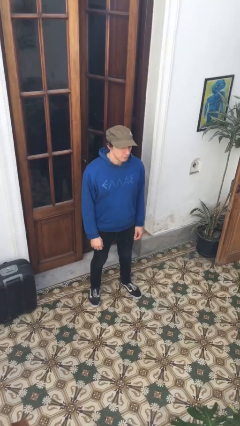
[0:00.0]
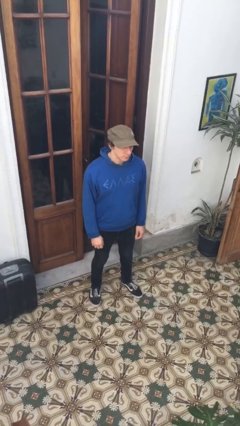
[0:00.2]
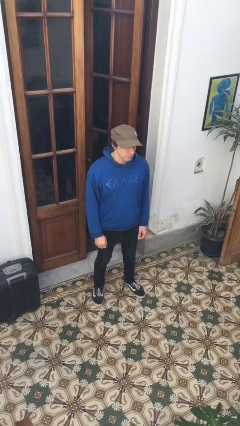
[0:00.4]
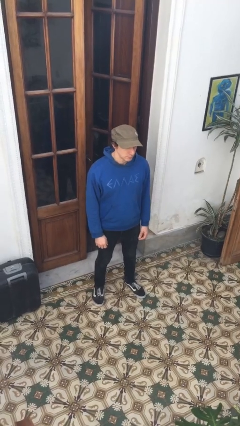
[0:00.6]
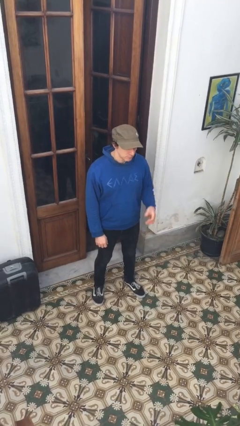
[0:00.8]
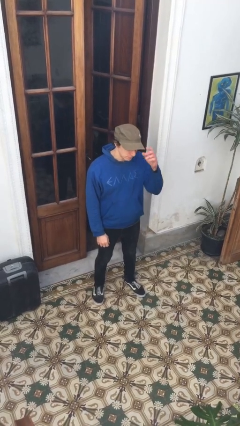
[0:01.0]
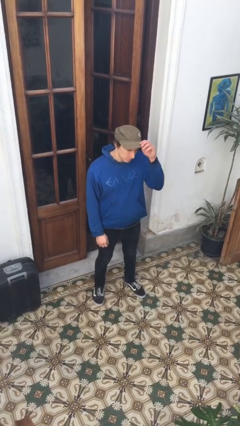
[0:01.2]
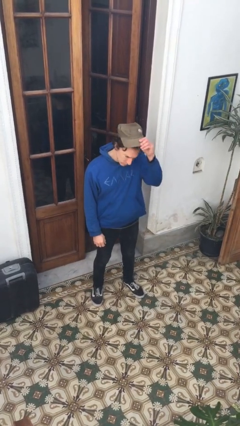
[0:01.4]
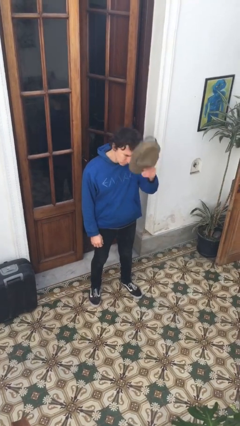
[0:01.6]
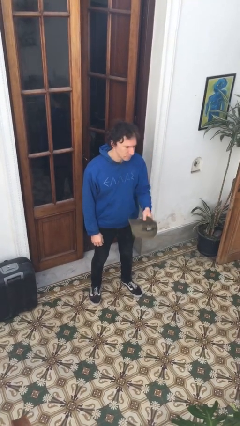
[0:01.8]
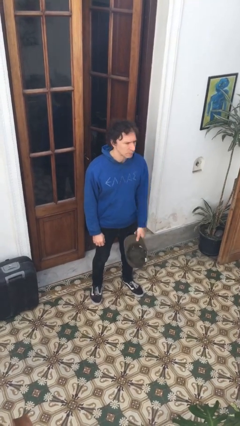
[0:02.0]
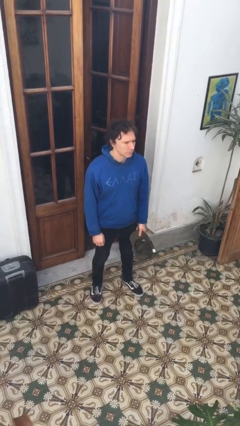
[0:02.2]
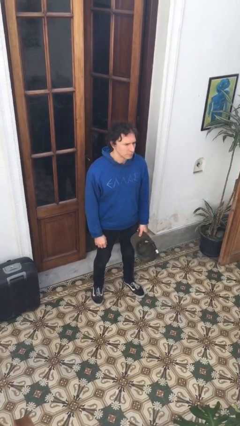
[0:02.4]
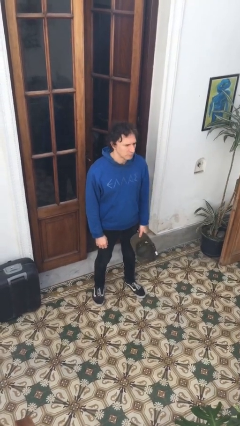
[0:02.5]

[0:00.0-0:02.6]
person takes off hat

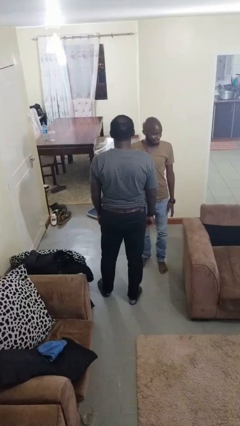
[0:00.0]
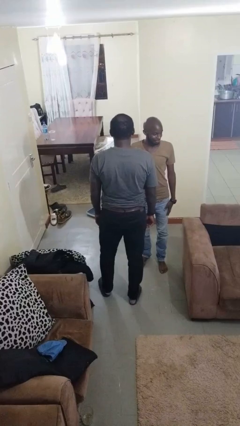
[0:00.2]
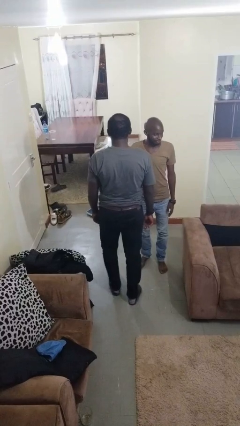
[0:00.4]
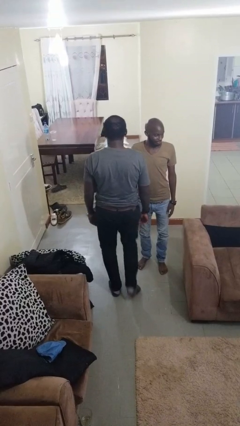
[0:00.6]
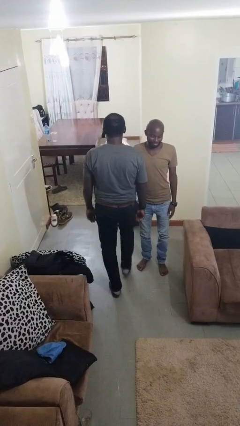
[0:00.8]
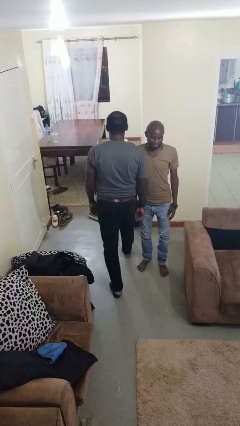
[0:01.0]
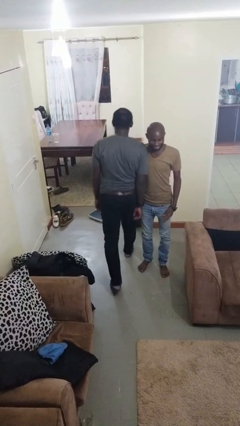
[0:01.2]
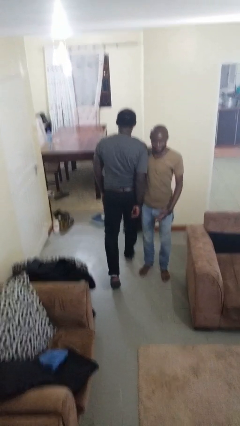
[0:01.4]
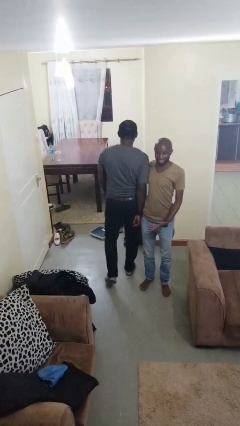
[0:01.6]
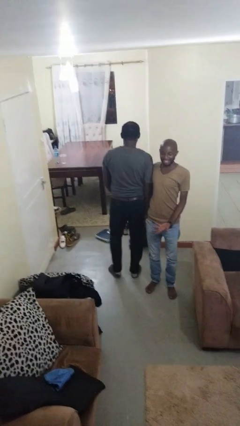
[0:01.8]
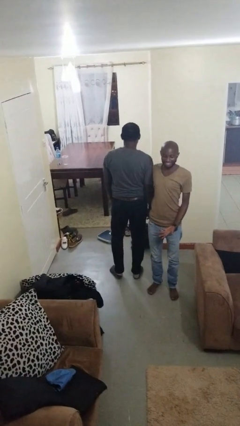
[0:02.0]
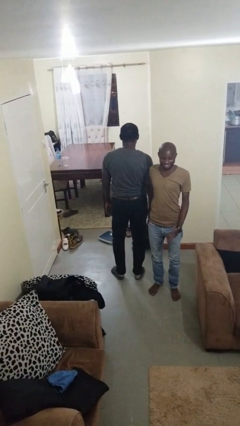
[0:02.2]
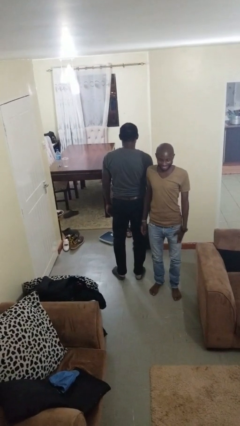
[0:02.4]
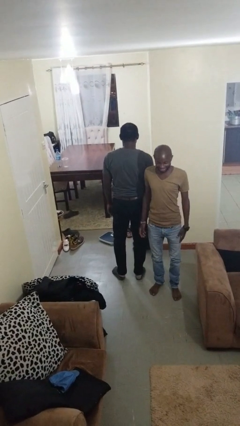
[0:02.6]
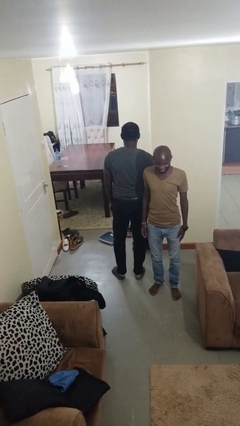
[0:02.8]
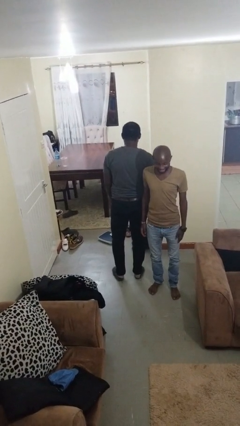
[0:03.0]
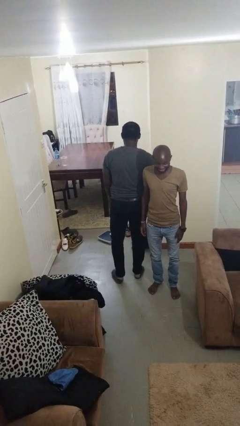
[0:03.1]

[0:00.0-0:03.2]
person bumps into person

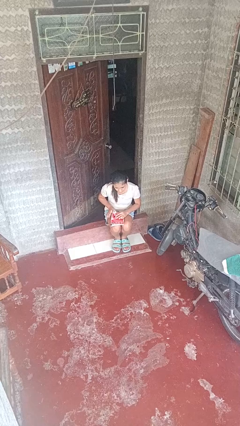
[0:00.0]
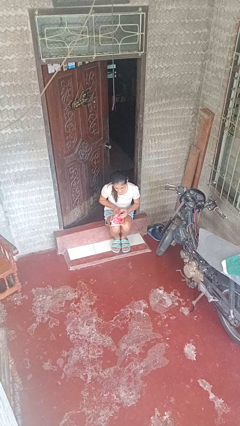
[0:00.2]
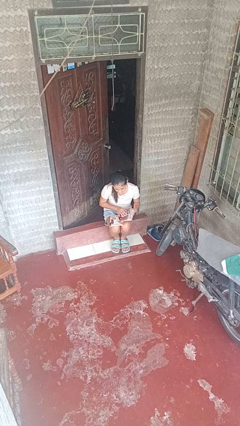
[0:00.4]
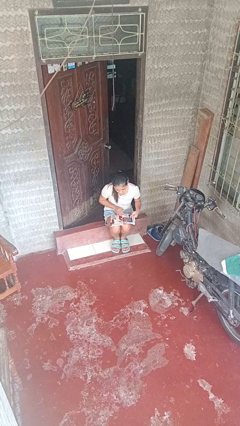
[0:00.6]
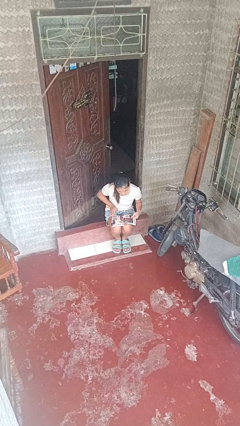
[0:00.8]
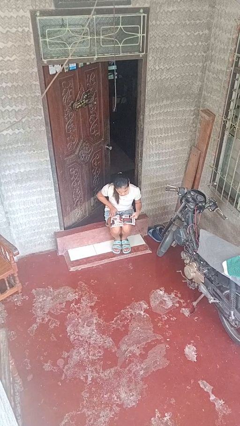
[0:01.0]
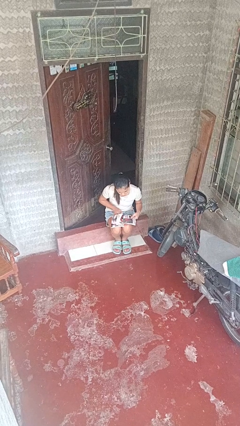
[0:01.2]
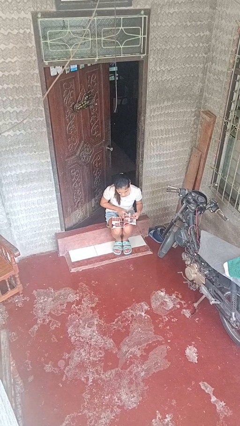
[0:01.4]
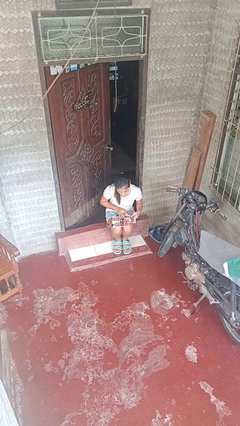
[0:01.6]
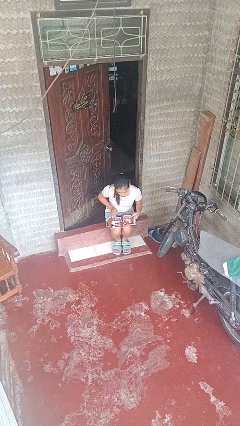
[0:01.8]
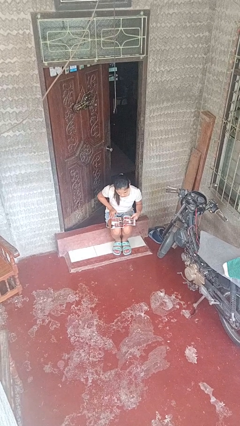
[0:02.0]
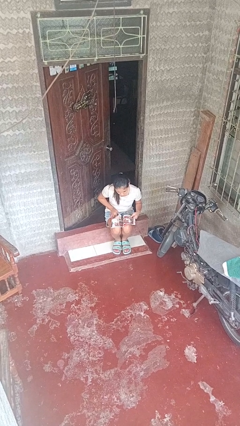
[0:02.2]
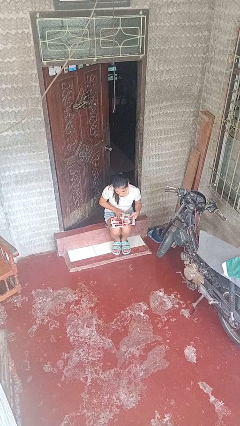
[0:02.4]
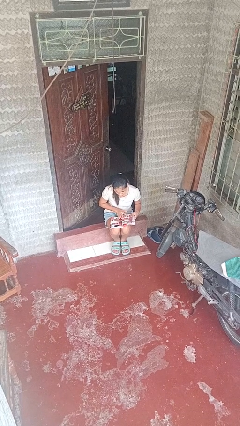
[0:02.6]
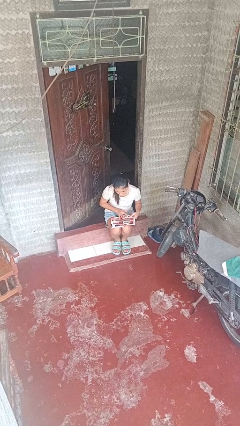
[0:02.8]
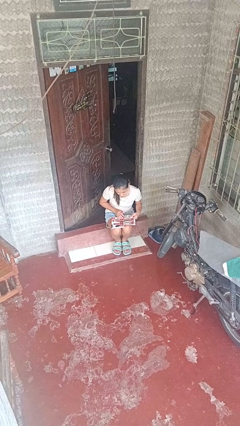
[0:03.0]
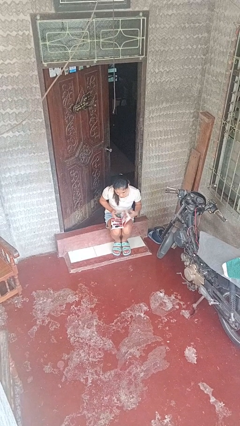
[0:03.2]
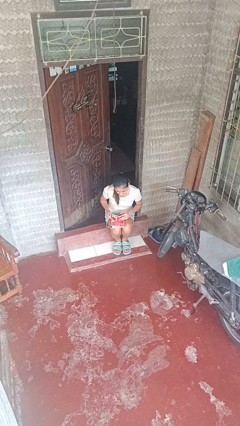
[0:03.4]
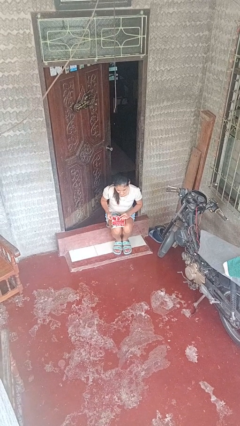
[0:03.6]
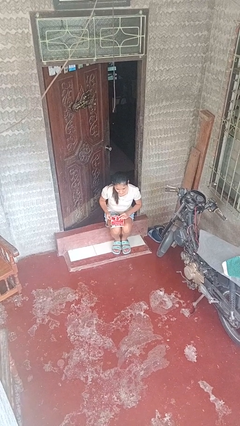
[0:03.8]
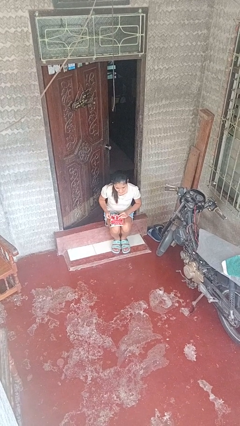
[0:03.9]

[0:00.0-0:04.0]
person reads magazine

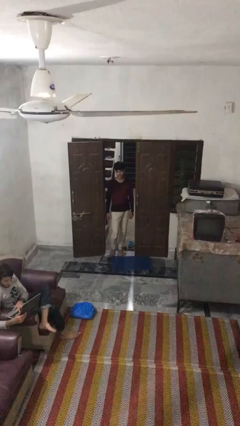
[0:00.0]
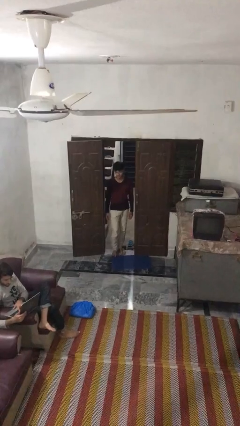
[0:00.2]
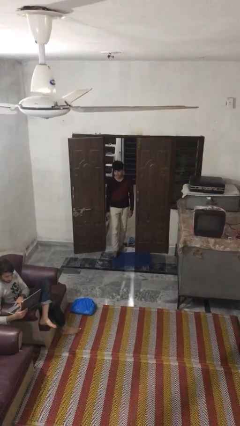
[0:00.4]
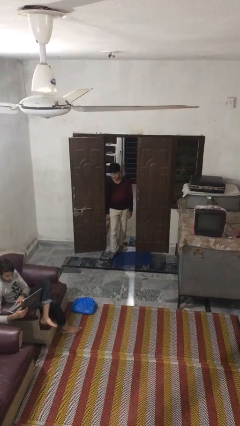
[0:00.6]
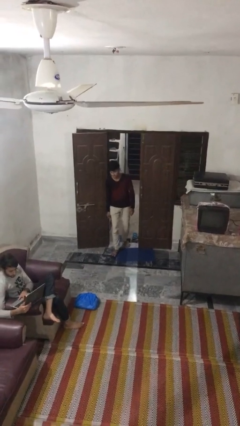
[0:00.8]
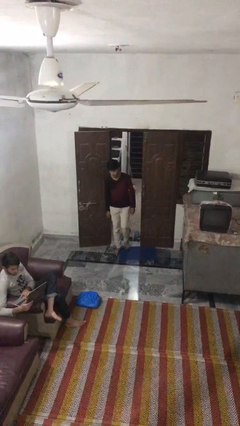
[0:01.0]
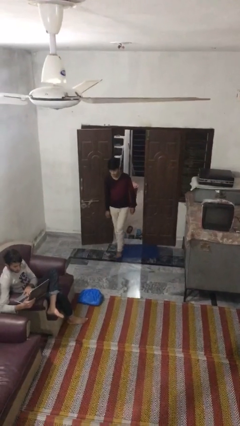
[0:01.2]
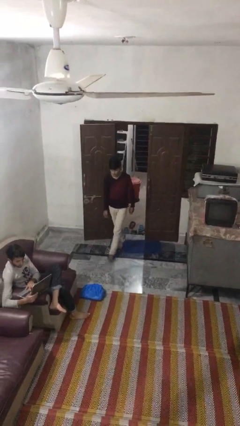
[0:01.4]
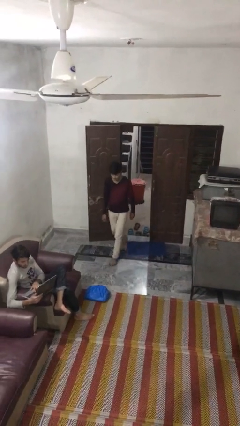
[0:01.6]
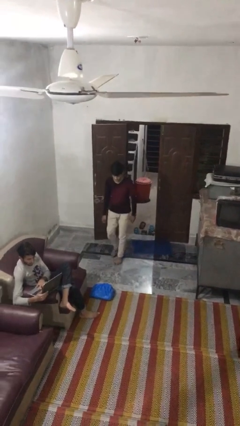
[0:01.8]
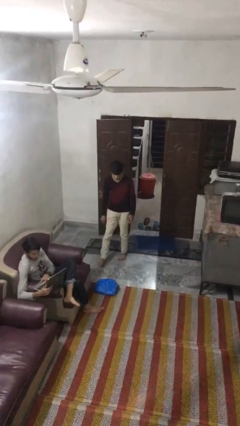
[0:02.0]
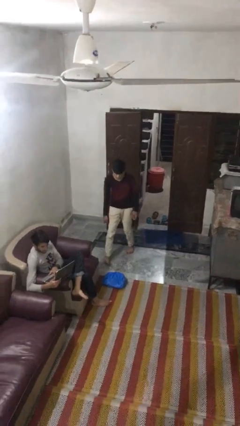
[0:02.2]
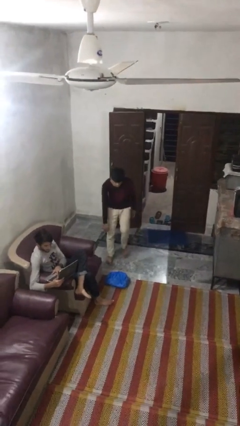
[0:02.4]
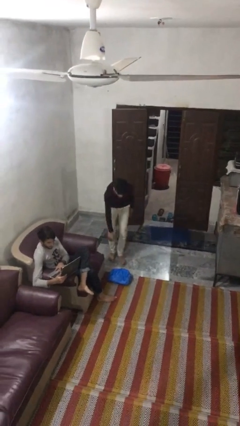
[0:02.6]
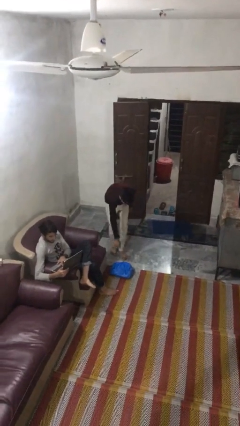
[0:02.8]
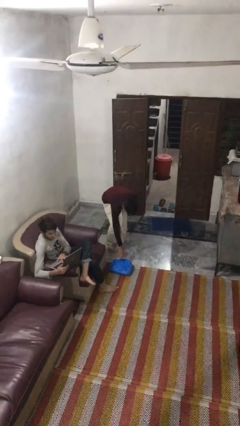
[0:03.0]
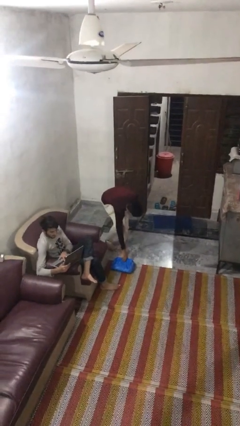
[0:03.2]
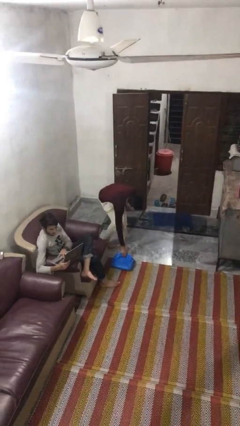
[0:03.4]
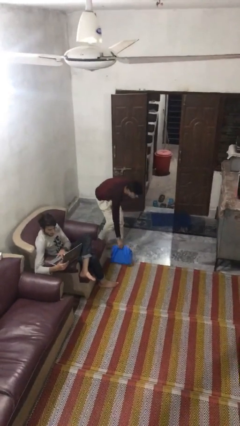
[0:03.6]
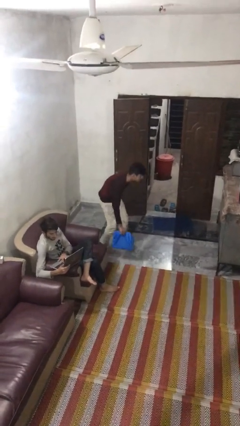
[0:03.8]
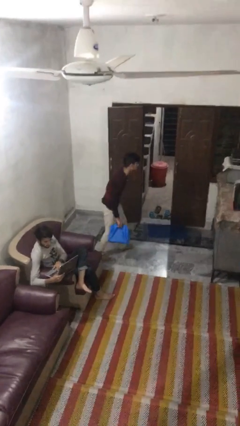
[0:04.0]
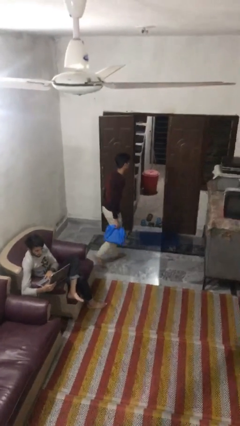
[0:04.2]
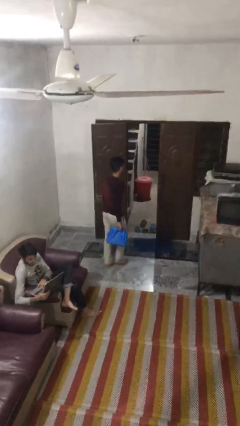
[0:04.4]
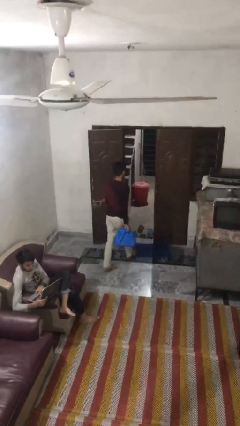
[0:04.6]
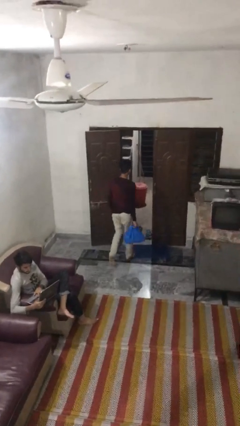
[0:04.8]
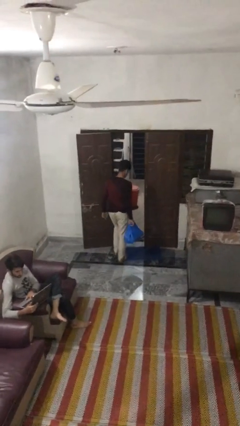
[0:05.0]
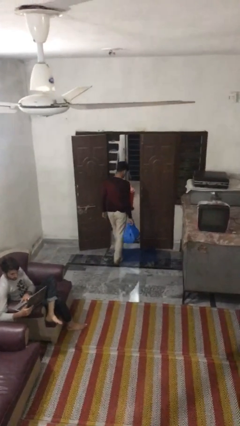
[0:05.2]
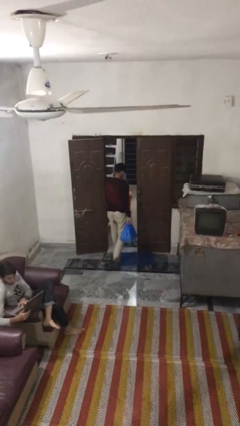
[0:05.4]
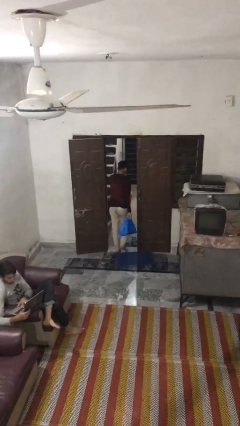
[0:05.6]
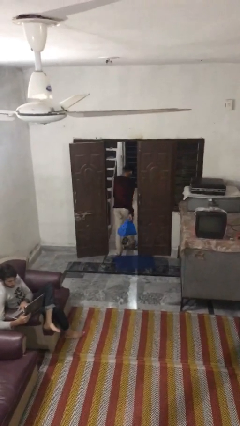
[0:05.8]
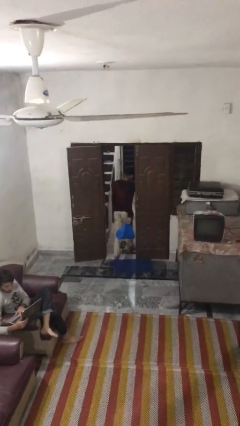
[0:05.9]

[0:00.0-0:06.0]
person steals object from person

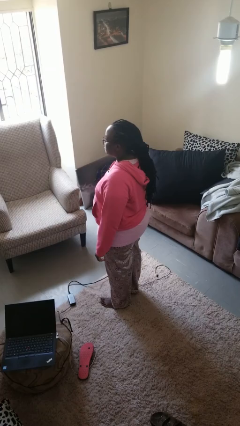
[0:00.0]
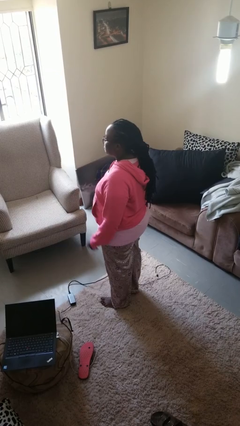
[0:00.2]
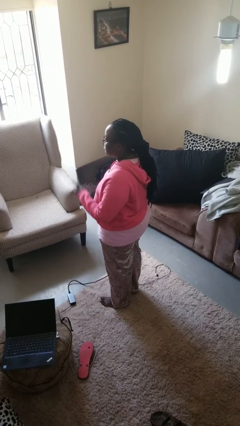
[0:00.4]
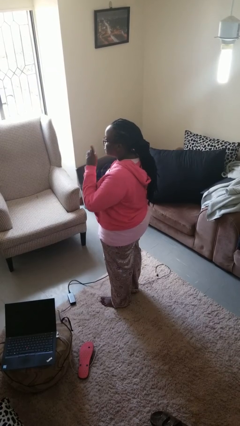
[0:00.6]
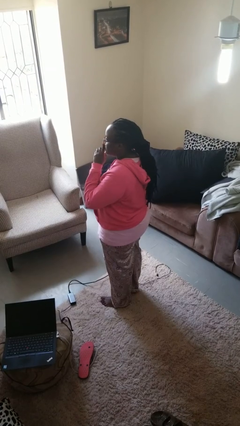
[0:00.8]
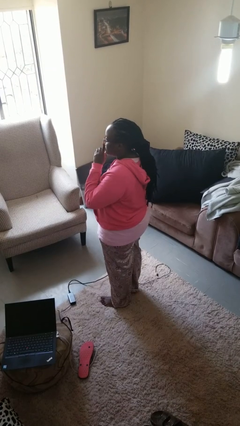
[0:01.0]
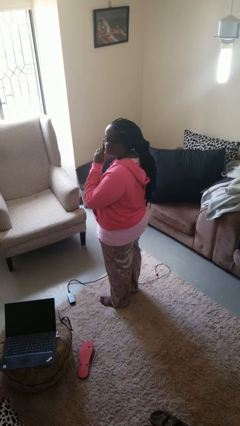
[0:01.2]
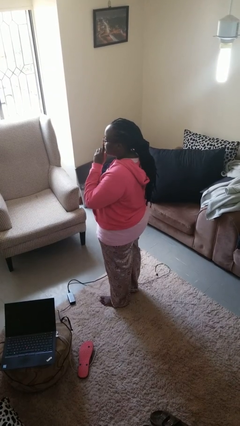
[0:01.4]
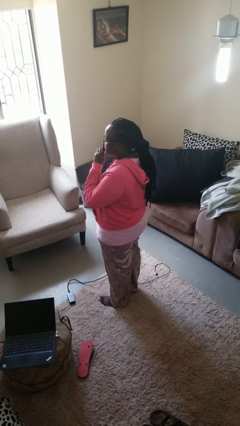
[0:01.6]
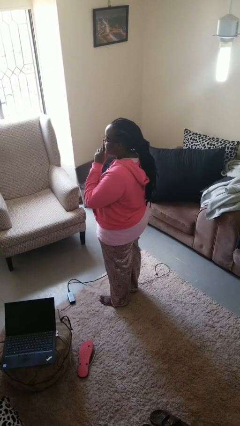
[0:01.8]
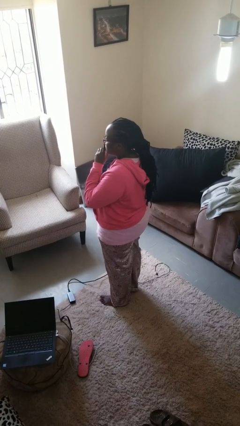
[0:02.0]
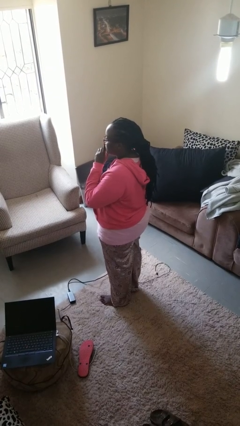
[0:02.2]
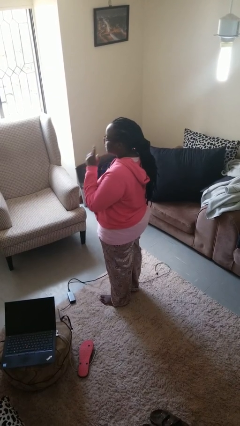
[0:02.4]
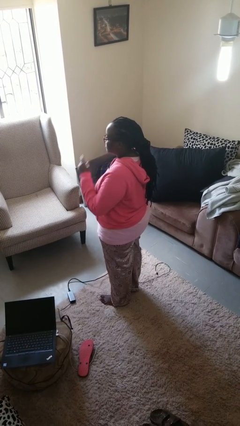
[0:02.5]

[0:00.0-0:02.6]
person gestures be quiet
